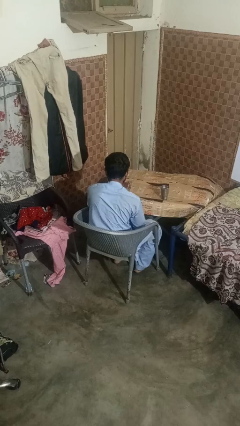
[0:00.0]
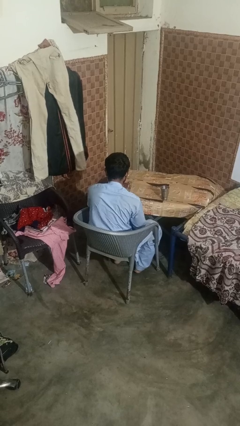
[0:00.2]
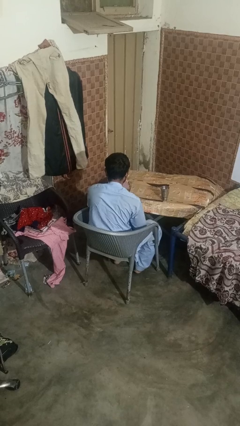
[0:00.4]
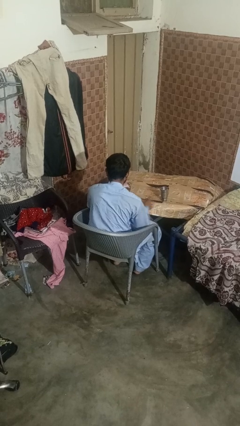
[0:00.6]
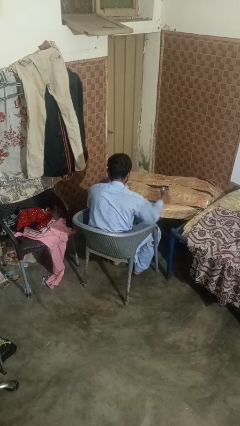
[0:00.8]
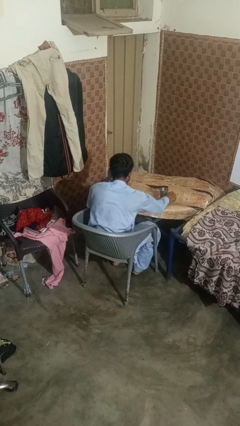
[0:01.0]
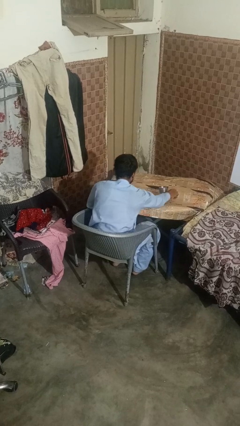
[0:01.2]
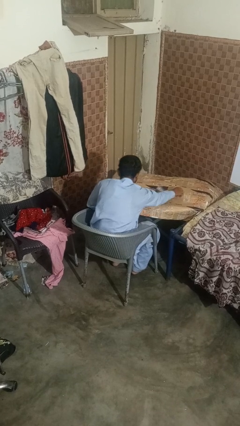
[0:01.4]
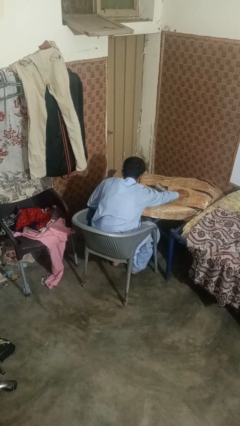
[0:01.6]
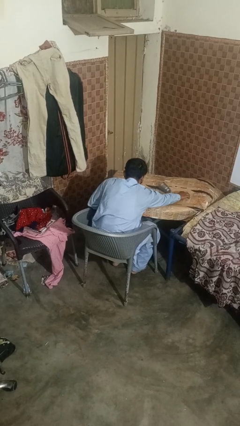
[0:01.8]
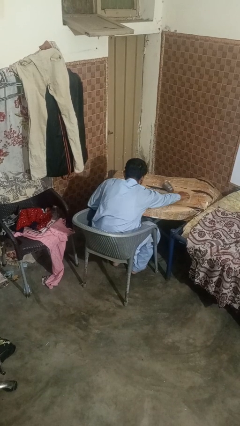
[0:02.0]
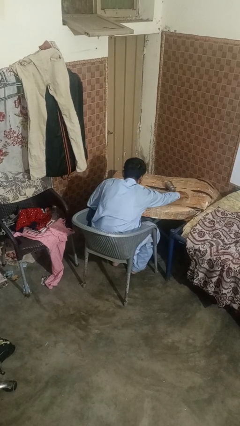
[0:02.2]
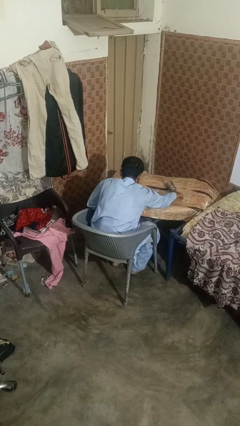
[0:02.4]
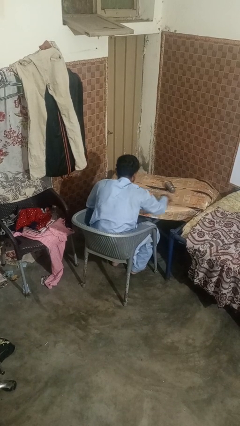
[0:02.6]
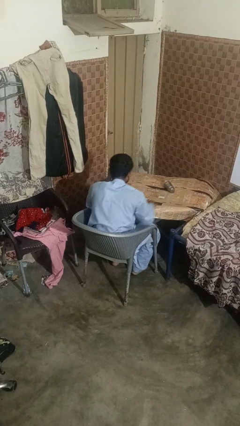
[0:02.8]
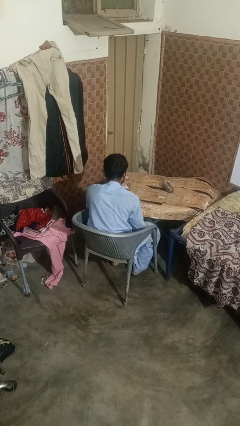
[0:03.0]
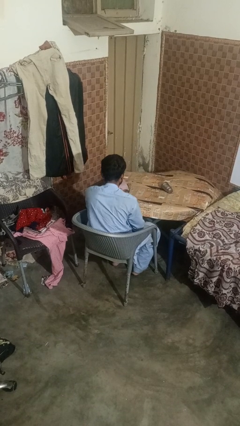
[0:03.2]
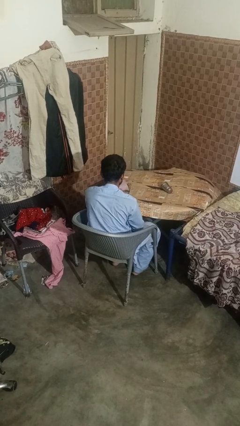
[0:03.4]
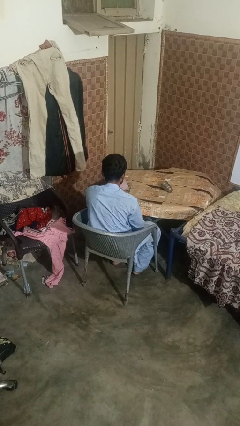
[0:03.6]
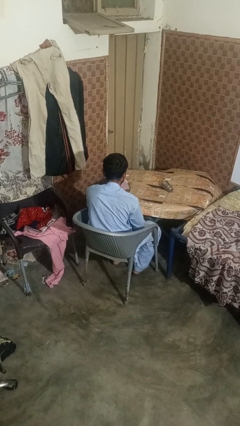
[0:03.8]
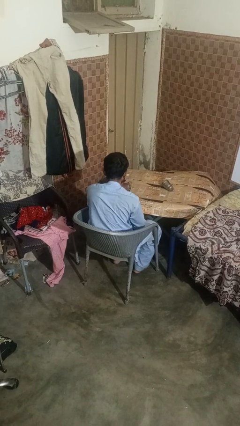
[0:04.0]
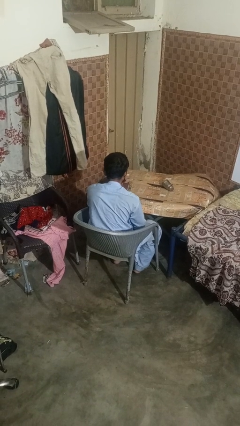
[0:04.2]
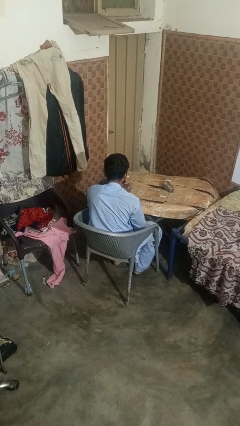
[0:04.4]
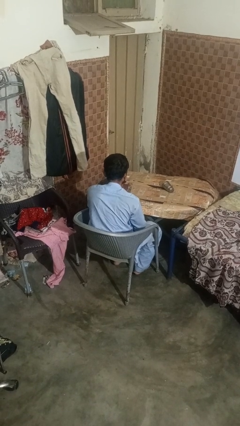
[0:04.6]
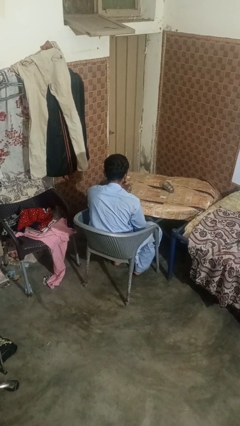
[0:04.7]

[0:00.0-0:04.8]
person knocks over glass

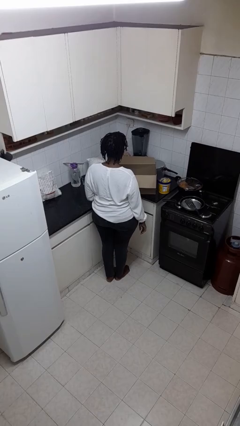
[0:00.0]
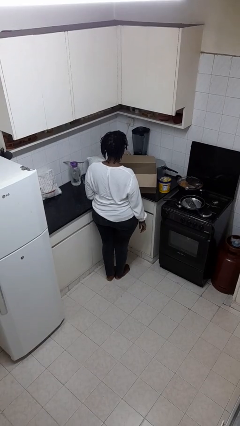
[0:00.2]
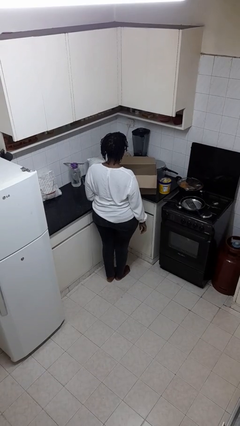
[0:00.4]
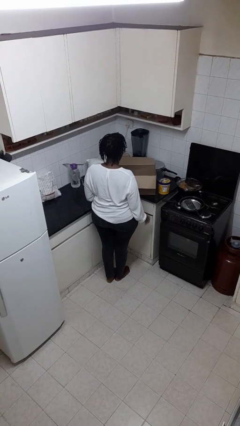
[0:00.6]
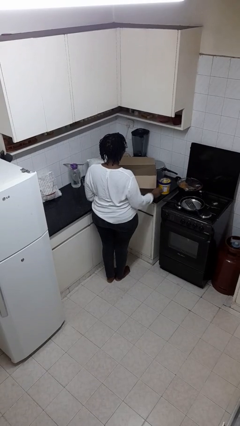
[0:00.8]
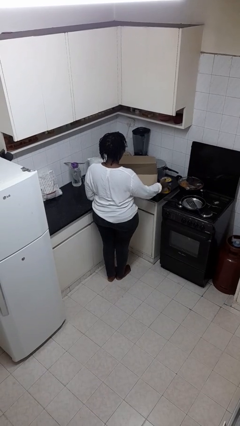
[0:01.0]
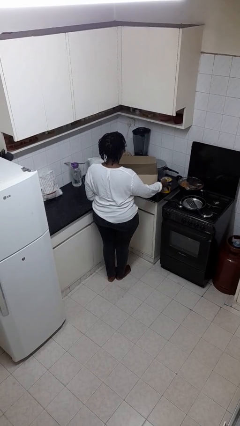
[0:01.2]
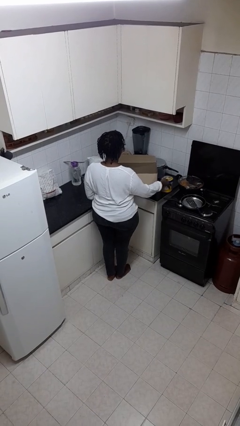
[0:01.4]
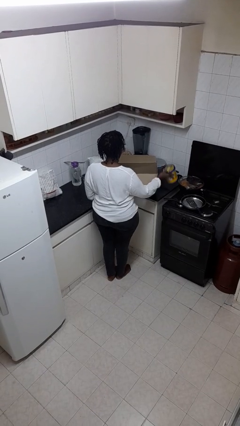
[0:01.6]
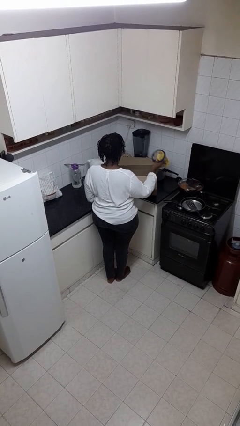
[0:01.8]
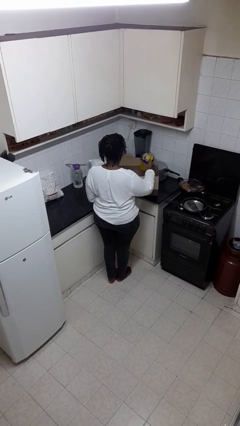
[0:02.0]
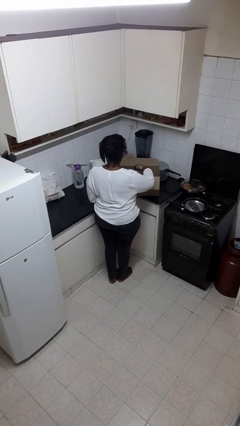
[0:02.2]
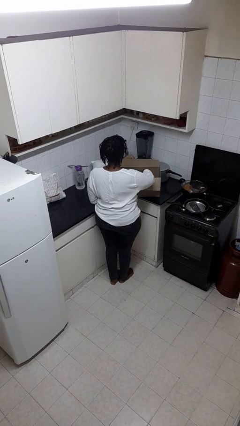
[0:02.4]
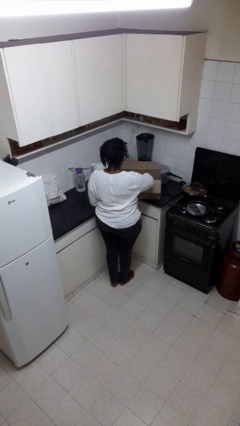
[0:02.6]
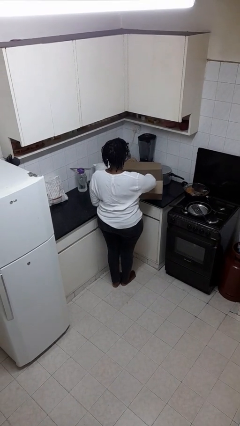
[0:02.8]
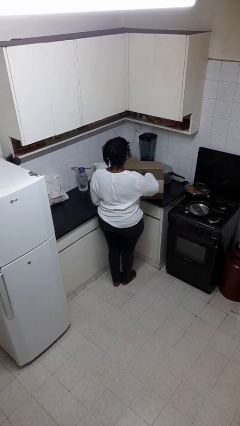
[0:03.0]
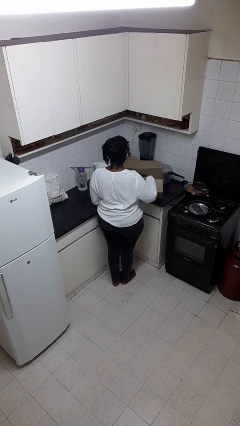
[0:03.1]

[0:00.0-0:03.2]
person puts object into box

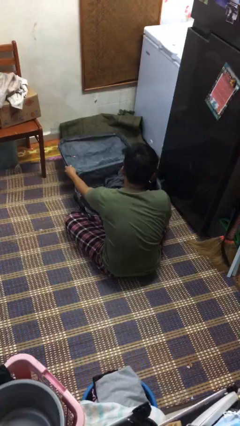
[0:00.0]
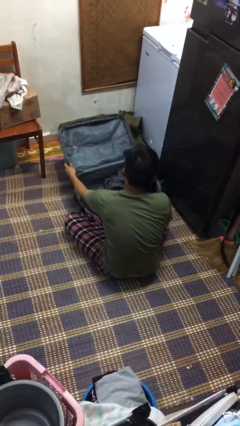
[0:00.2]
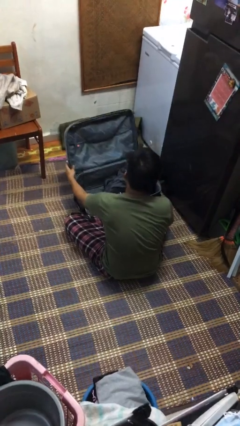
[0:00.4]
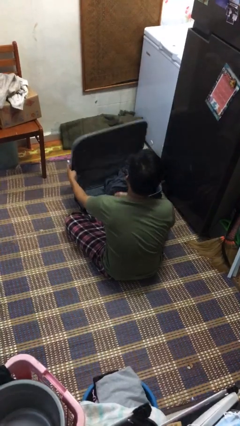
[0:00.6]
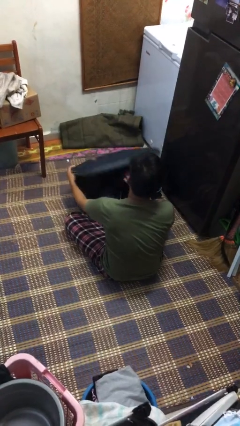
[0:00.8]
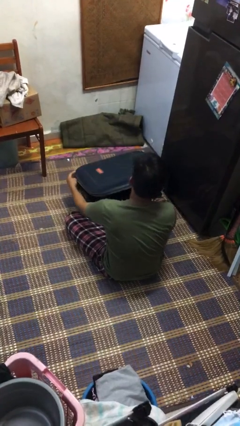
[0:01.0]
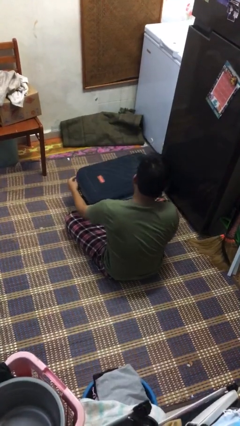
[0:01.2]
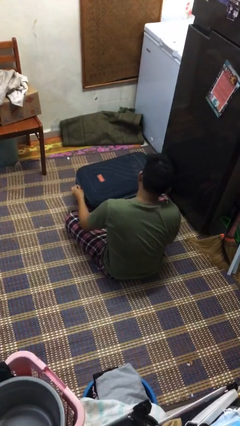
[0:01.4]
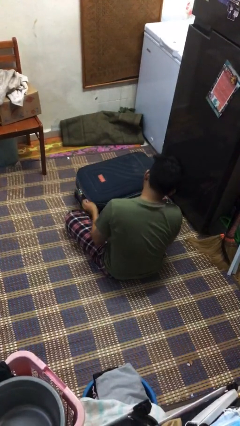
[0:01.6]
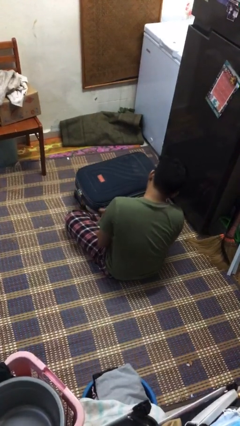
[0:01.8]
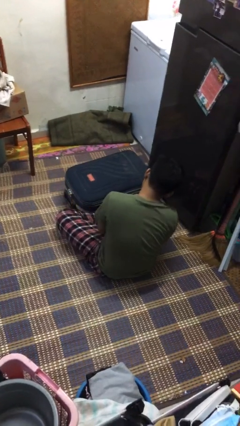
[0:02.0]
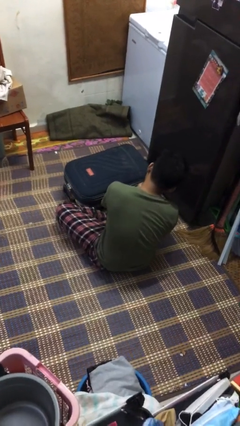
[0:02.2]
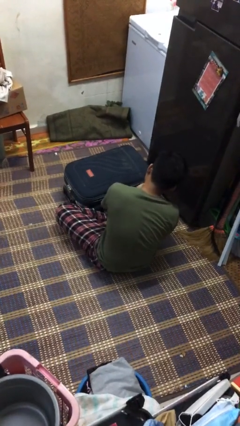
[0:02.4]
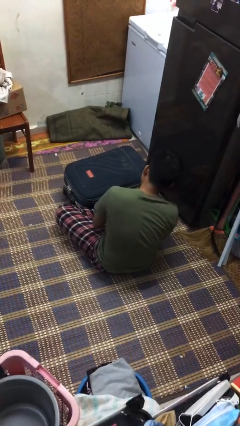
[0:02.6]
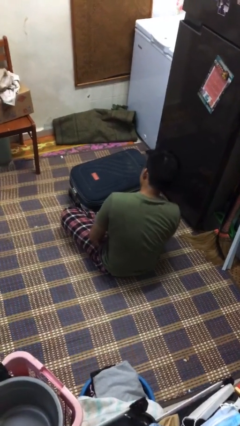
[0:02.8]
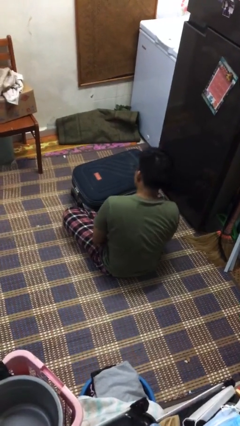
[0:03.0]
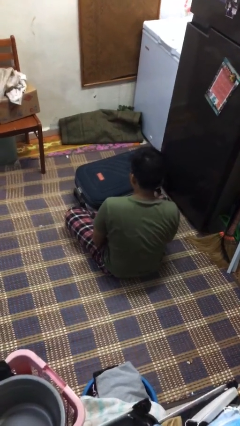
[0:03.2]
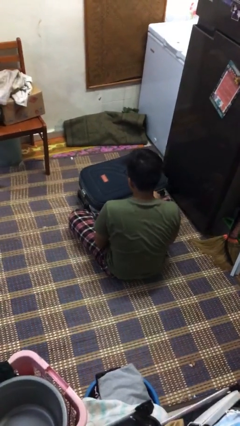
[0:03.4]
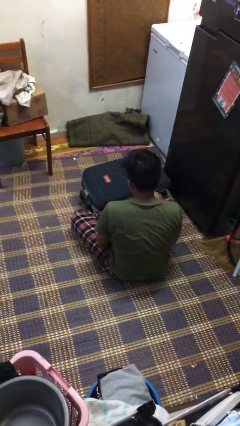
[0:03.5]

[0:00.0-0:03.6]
person closes suitcase

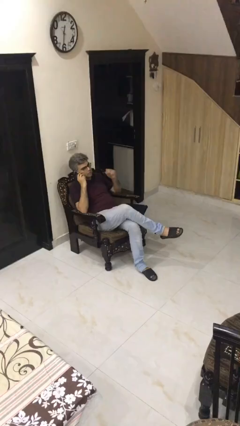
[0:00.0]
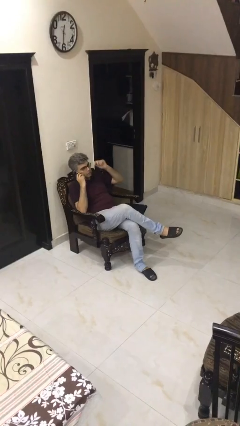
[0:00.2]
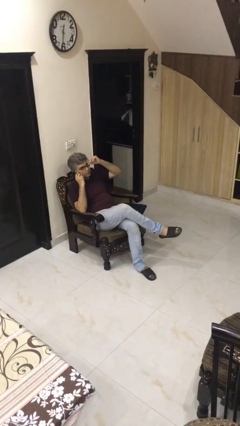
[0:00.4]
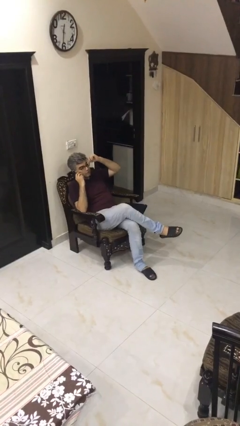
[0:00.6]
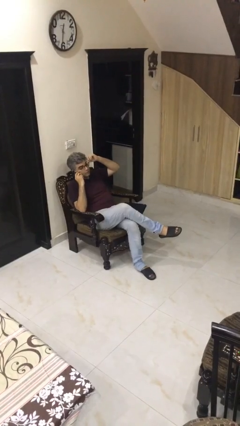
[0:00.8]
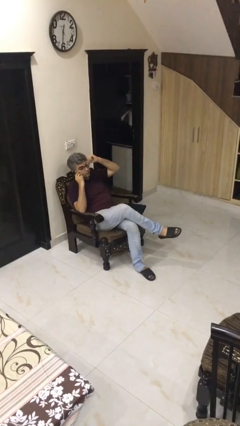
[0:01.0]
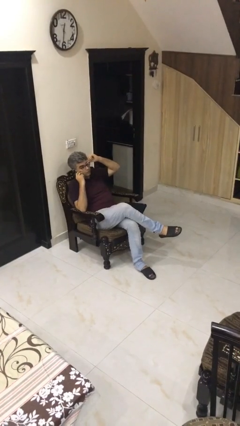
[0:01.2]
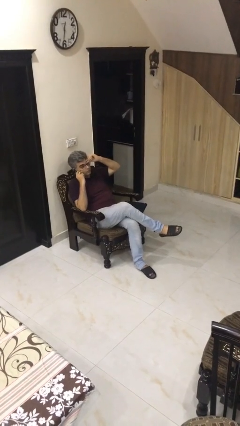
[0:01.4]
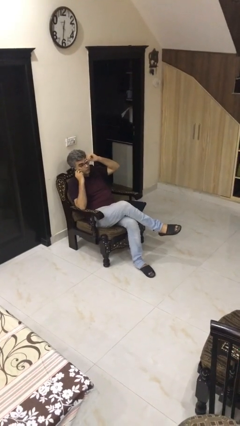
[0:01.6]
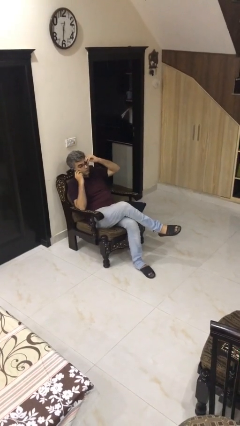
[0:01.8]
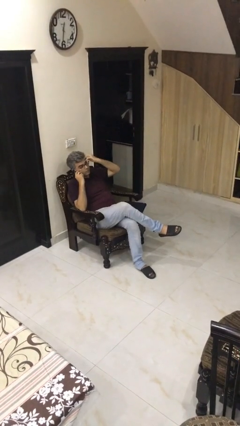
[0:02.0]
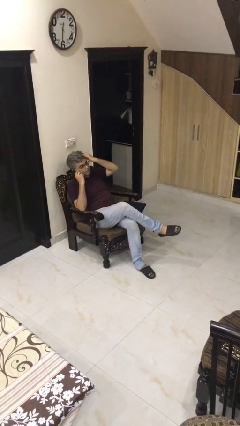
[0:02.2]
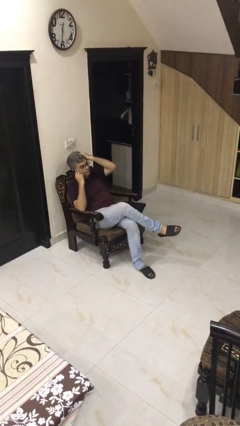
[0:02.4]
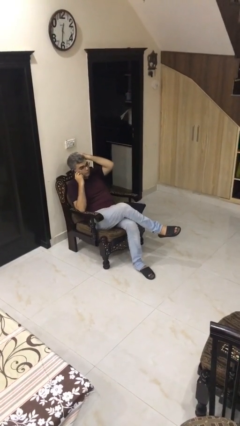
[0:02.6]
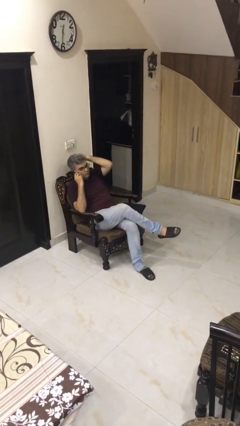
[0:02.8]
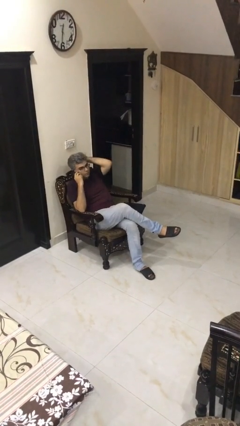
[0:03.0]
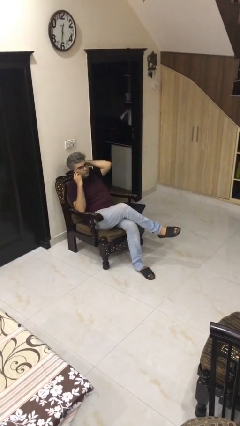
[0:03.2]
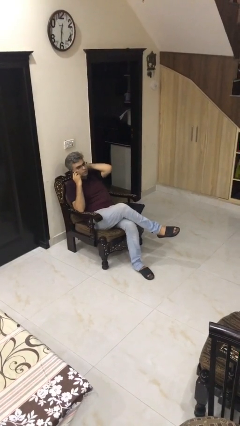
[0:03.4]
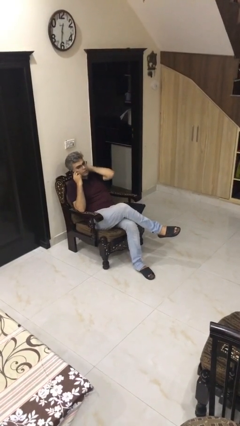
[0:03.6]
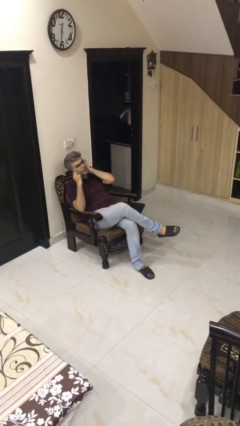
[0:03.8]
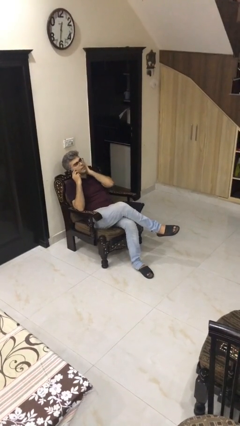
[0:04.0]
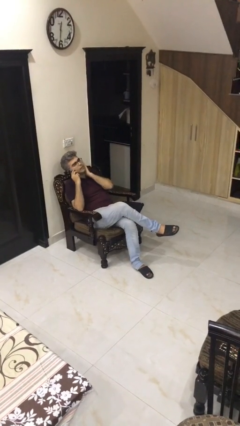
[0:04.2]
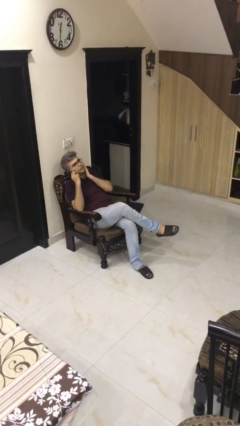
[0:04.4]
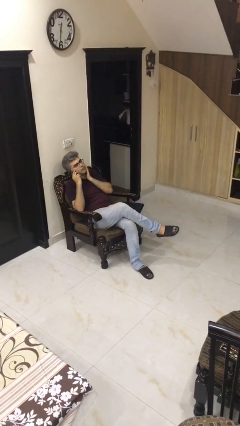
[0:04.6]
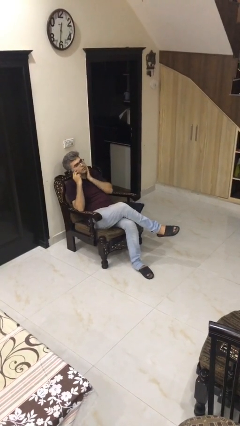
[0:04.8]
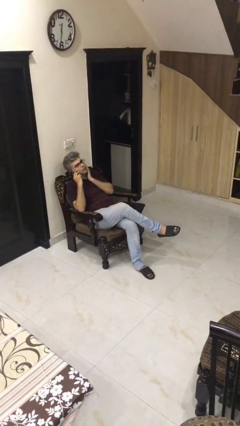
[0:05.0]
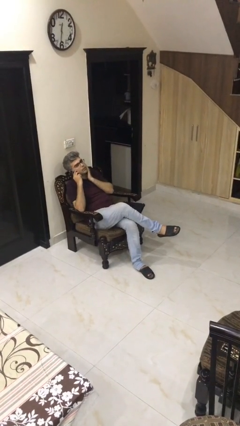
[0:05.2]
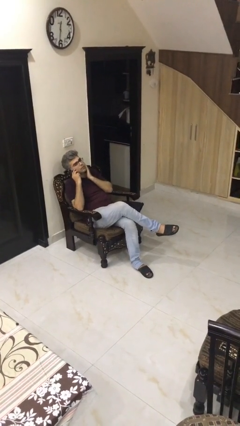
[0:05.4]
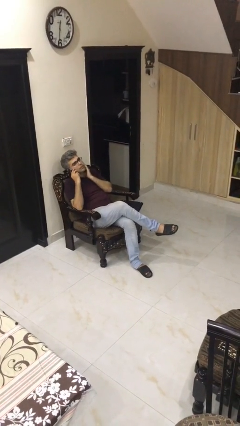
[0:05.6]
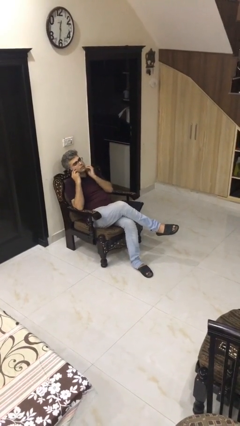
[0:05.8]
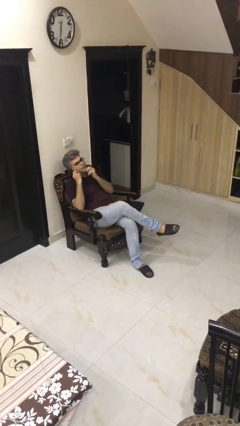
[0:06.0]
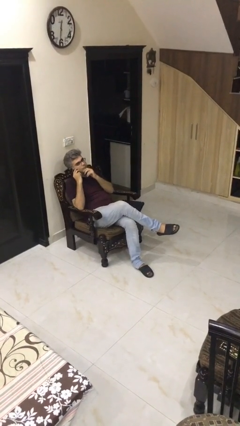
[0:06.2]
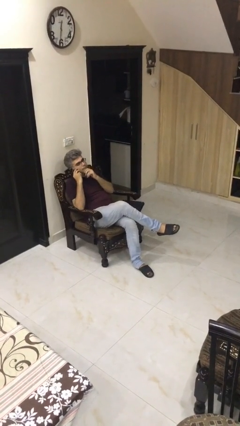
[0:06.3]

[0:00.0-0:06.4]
person talks on phone
